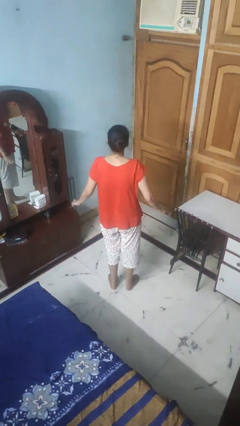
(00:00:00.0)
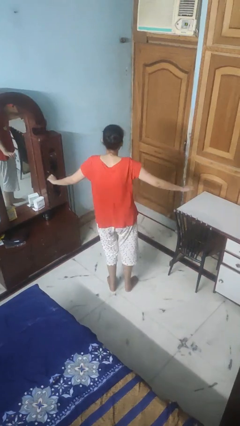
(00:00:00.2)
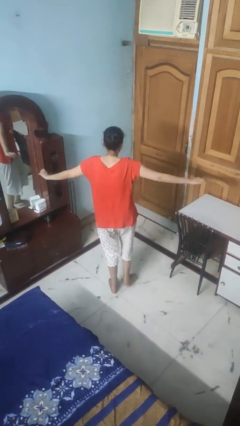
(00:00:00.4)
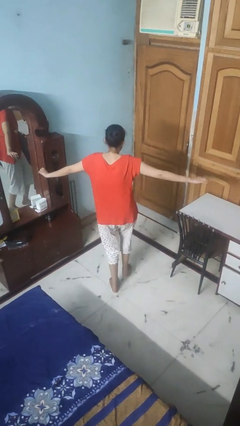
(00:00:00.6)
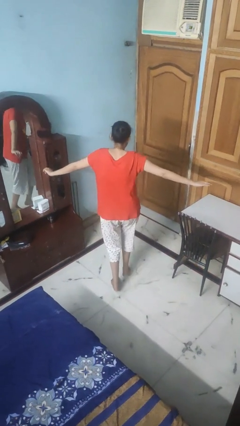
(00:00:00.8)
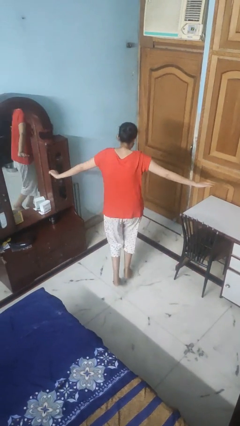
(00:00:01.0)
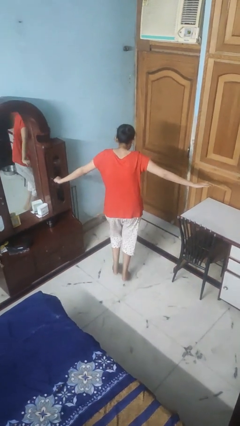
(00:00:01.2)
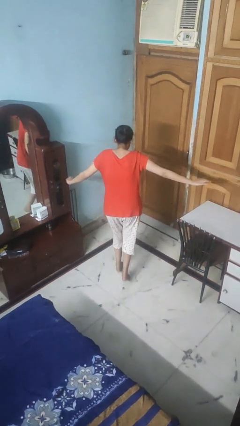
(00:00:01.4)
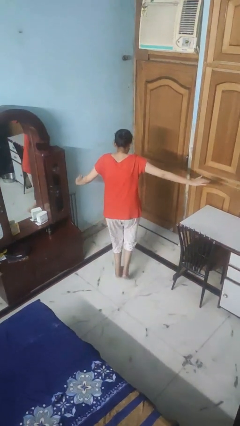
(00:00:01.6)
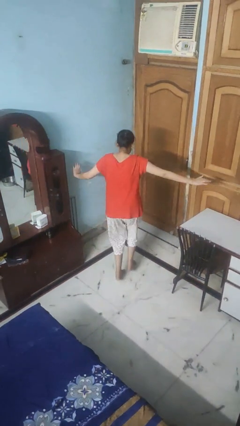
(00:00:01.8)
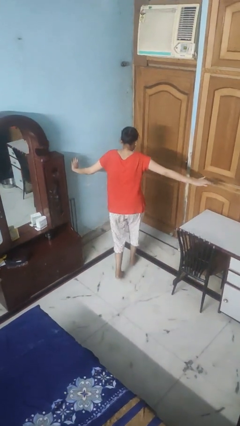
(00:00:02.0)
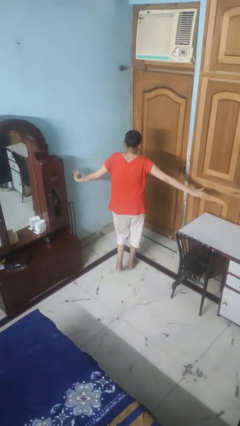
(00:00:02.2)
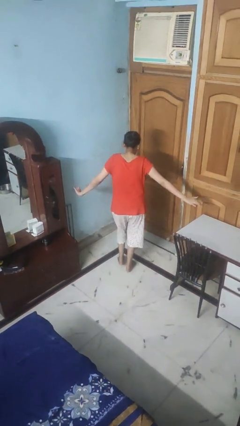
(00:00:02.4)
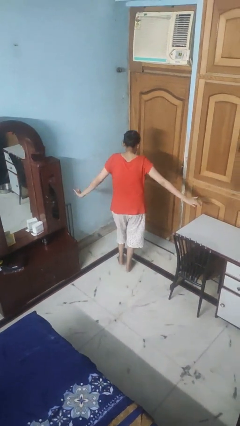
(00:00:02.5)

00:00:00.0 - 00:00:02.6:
person walks tiptoe

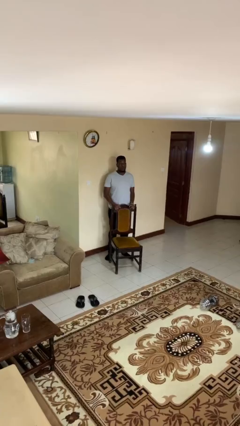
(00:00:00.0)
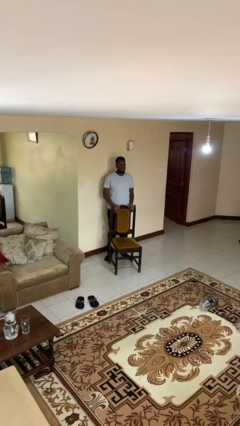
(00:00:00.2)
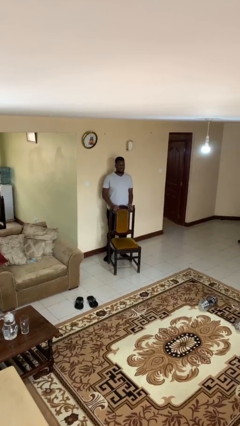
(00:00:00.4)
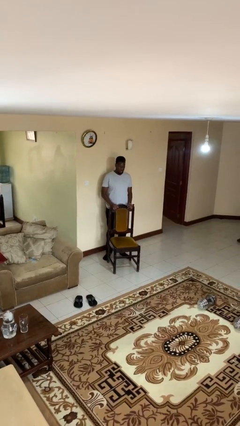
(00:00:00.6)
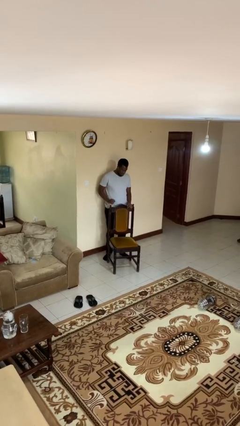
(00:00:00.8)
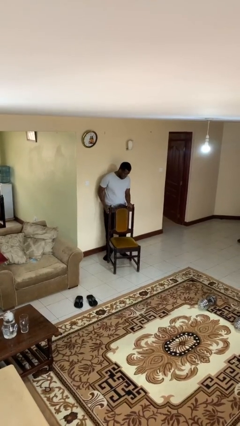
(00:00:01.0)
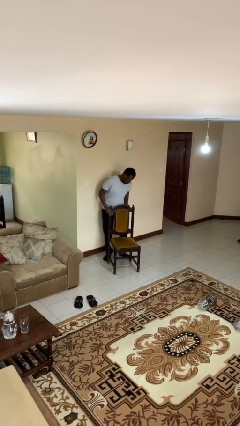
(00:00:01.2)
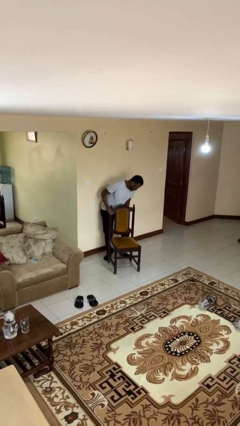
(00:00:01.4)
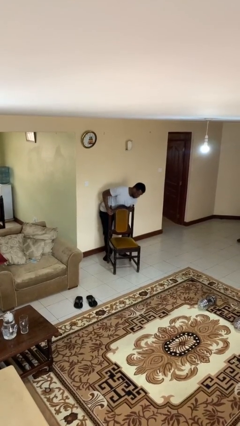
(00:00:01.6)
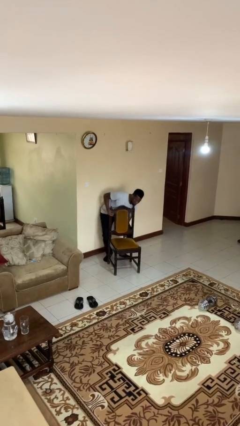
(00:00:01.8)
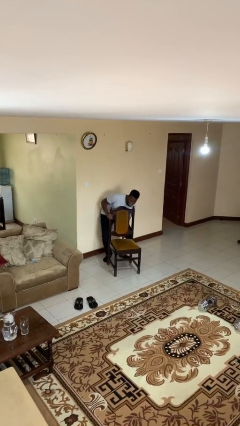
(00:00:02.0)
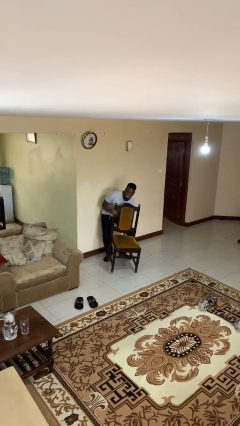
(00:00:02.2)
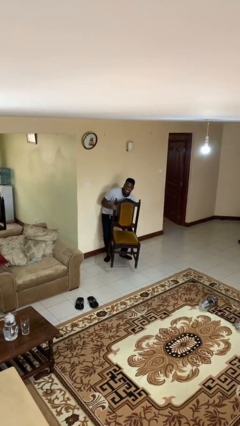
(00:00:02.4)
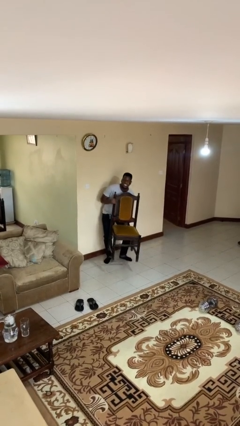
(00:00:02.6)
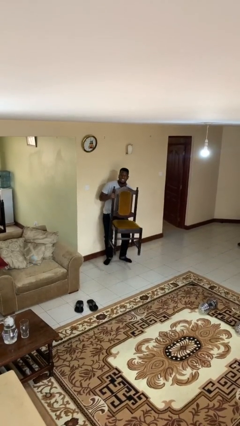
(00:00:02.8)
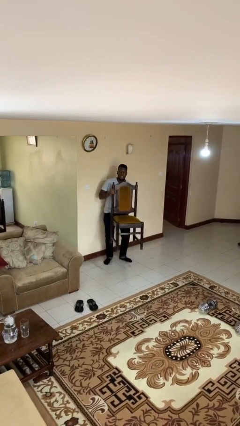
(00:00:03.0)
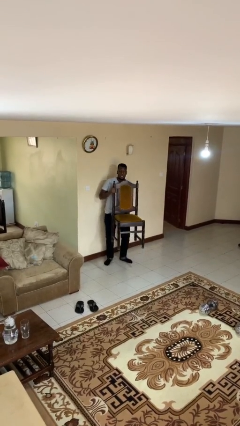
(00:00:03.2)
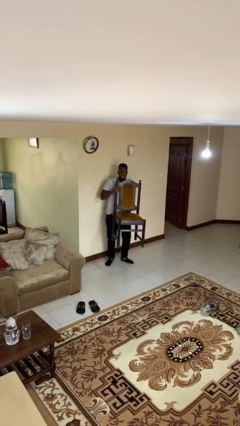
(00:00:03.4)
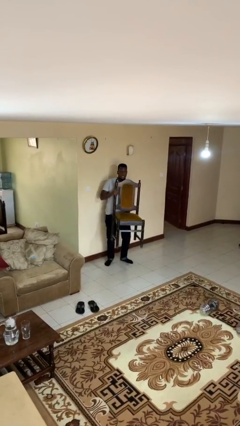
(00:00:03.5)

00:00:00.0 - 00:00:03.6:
person picks up object from floor

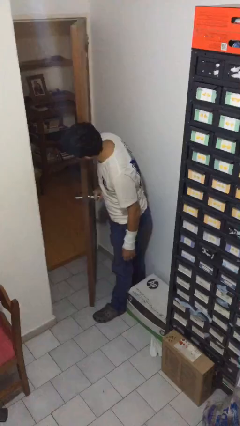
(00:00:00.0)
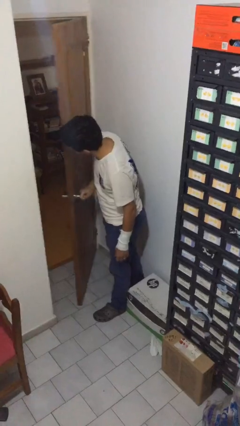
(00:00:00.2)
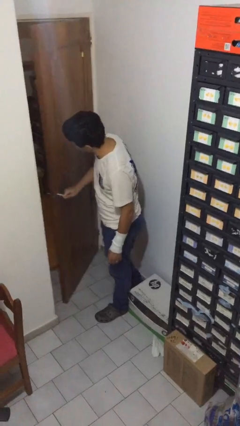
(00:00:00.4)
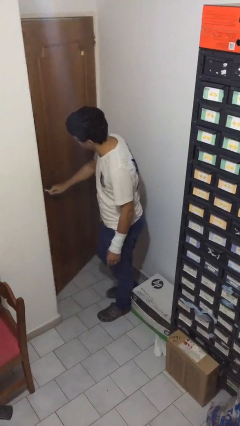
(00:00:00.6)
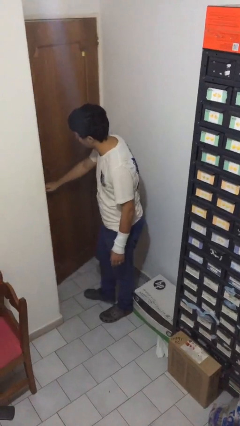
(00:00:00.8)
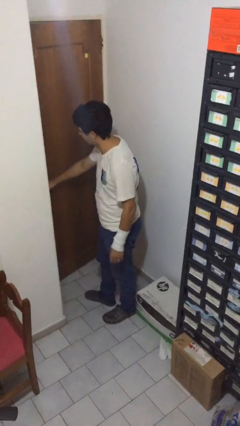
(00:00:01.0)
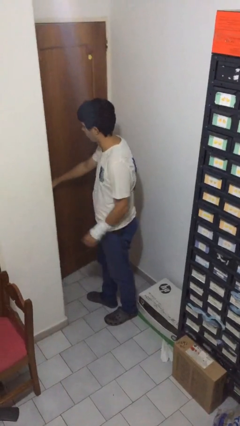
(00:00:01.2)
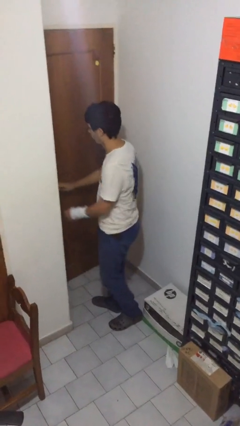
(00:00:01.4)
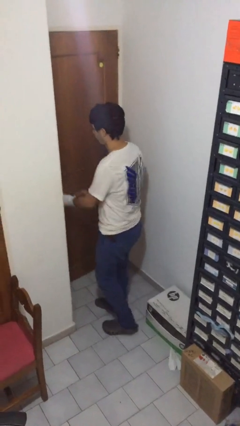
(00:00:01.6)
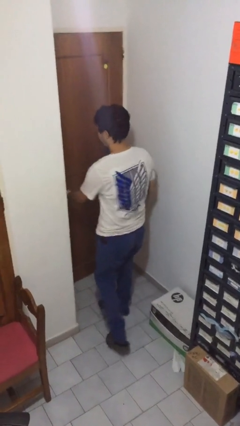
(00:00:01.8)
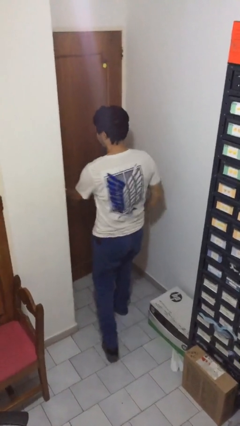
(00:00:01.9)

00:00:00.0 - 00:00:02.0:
person closes facility door

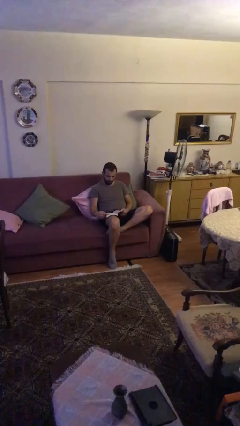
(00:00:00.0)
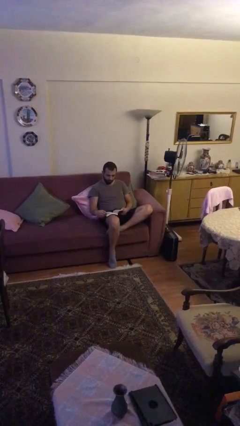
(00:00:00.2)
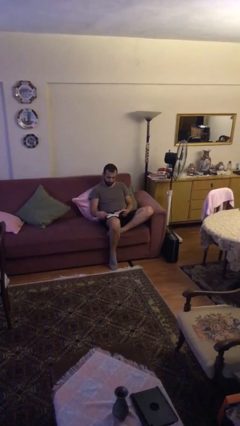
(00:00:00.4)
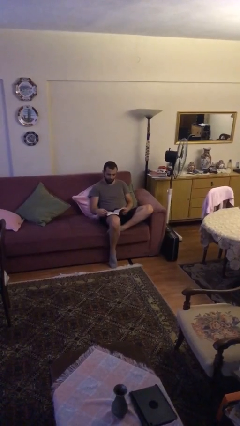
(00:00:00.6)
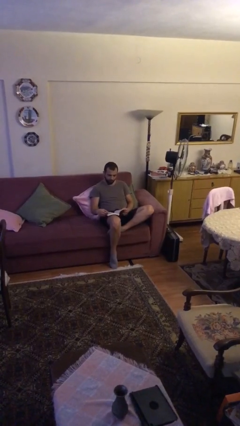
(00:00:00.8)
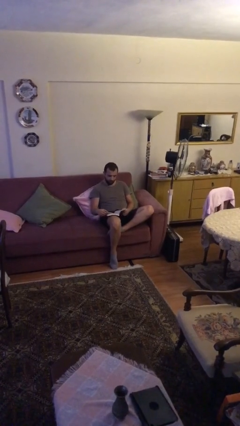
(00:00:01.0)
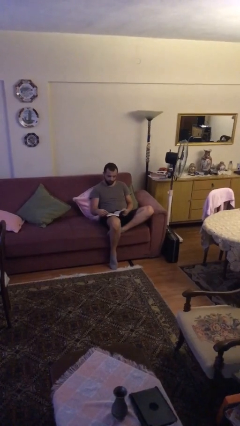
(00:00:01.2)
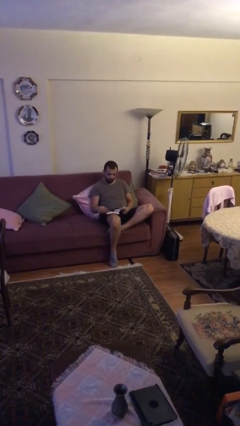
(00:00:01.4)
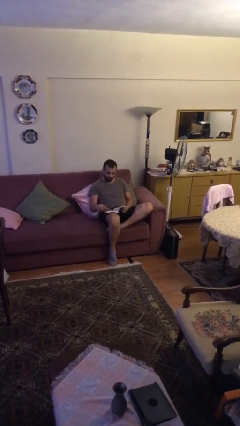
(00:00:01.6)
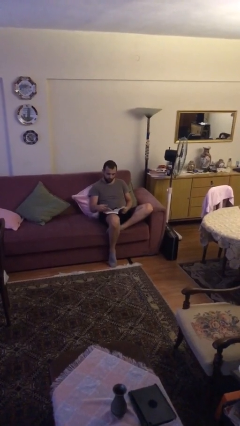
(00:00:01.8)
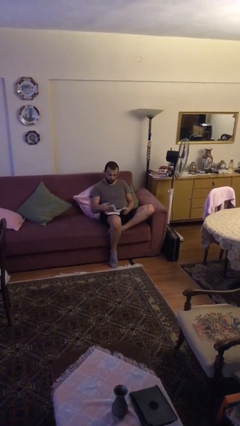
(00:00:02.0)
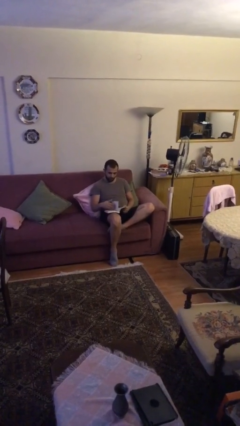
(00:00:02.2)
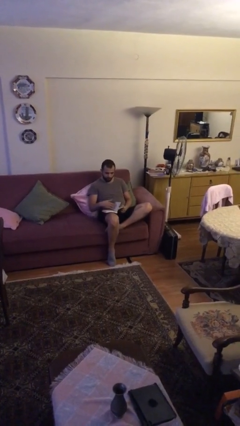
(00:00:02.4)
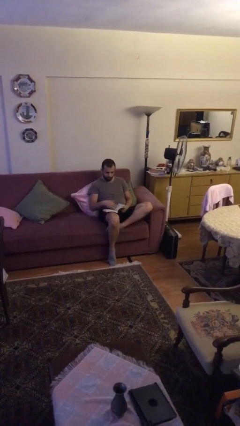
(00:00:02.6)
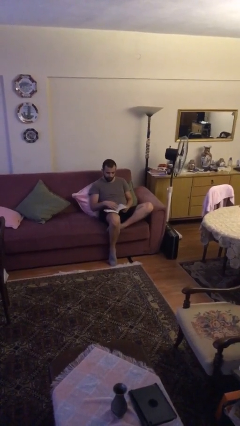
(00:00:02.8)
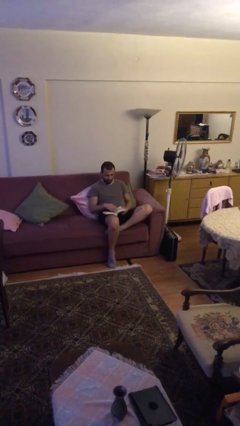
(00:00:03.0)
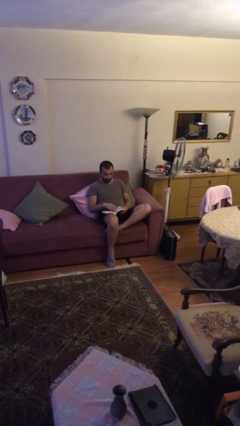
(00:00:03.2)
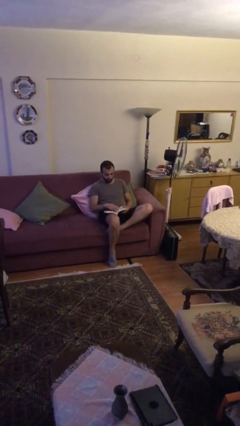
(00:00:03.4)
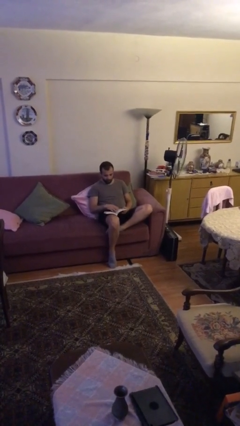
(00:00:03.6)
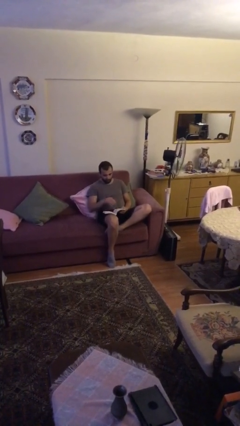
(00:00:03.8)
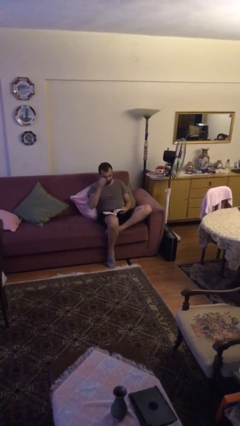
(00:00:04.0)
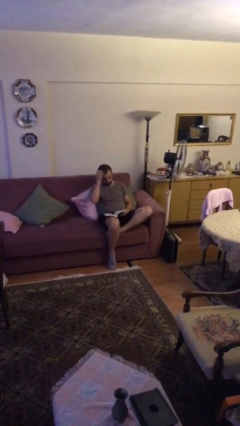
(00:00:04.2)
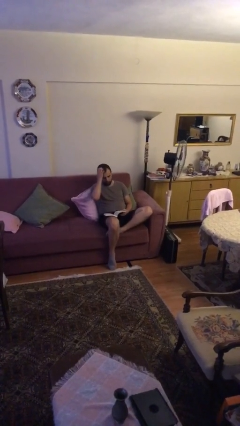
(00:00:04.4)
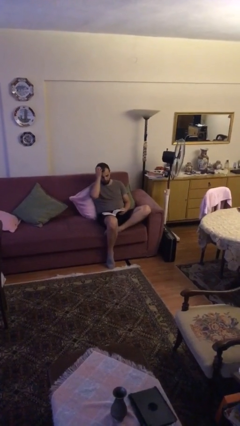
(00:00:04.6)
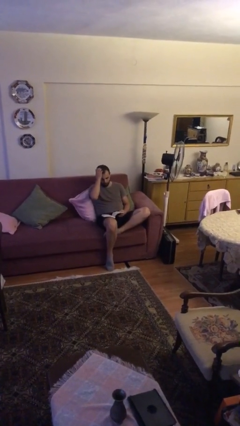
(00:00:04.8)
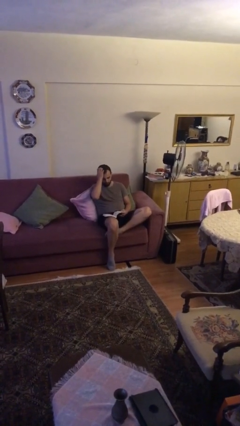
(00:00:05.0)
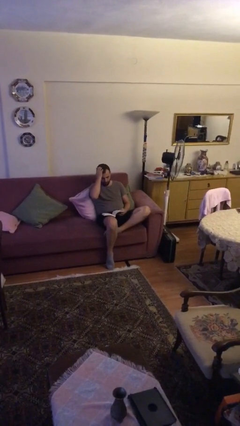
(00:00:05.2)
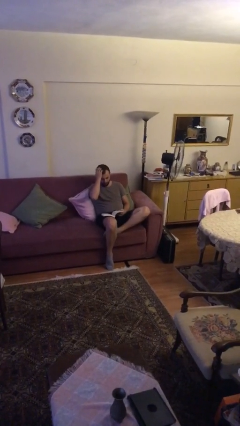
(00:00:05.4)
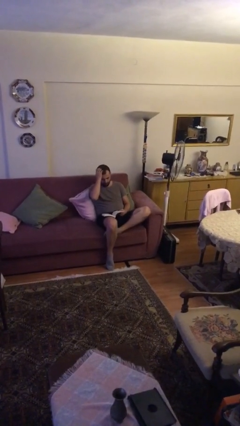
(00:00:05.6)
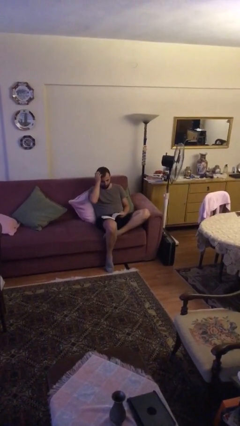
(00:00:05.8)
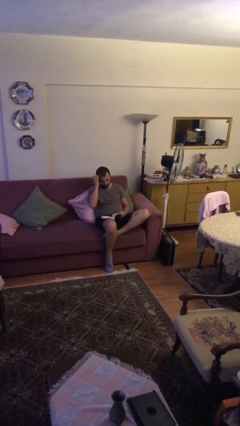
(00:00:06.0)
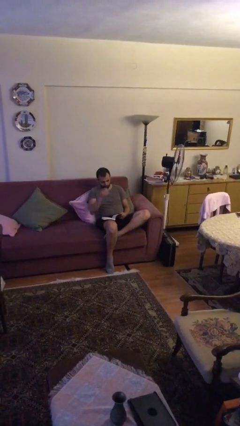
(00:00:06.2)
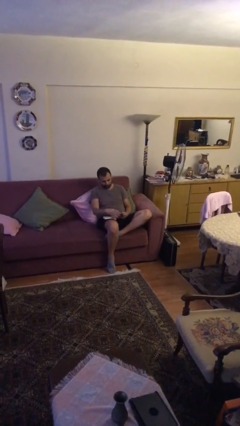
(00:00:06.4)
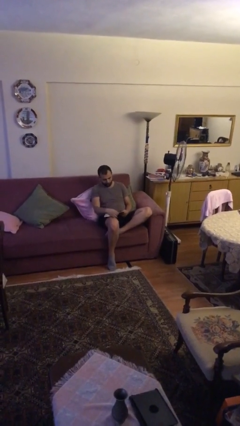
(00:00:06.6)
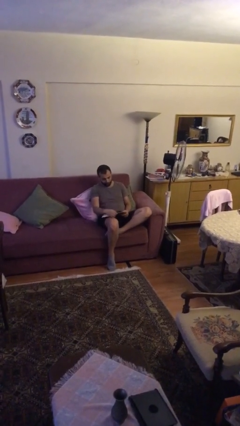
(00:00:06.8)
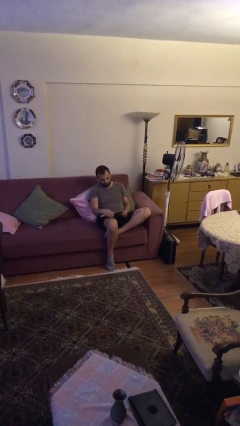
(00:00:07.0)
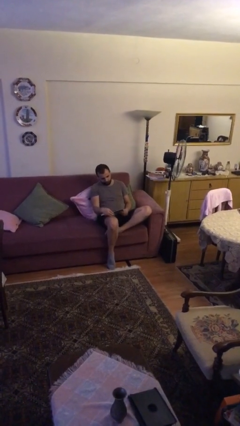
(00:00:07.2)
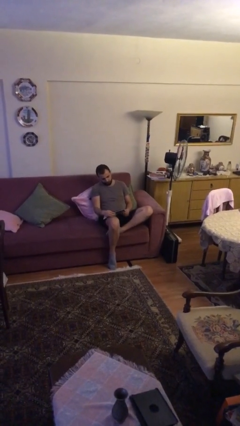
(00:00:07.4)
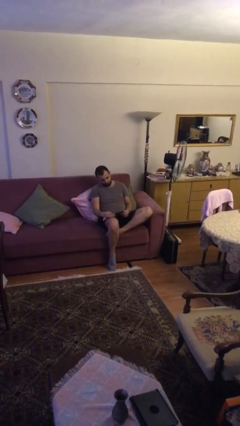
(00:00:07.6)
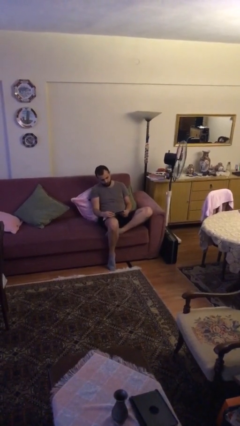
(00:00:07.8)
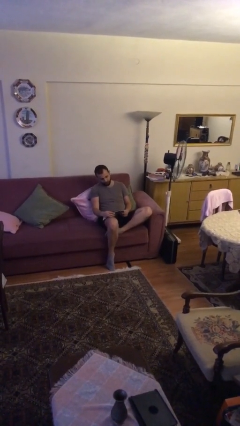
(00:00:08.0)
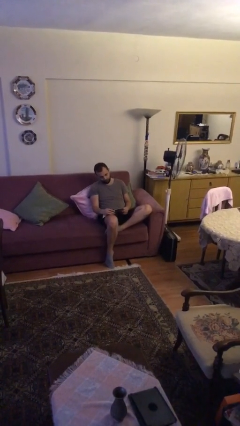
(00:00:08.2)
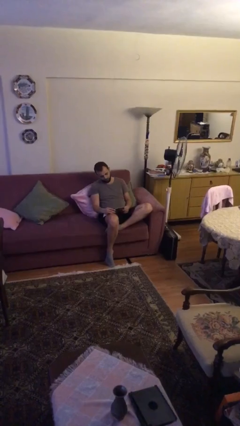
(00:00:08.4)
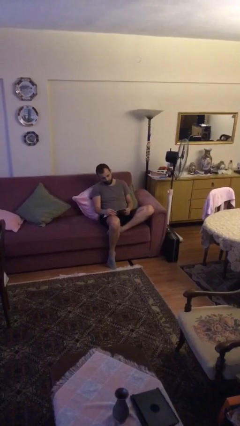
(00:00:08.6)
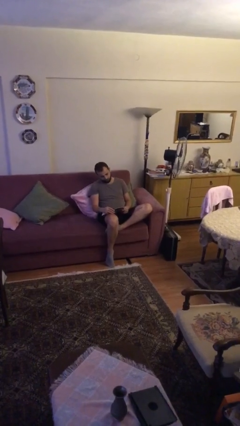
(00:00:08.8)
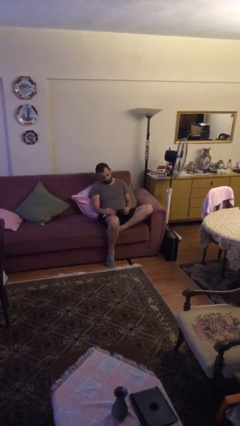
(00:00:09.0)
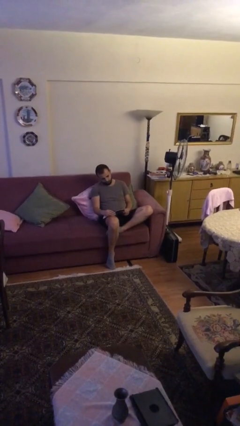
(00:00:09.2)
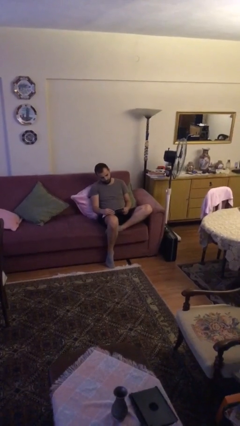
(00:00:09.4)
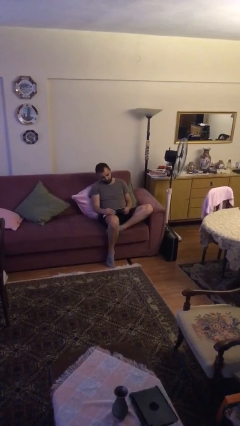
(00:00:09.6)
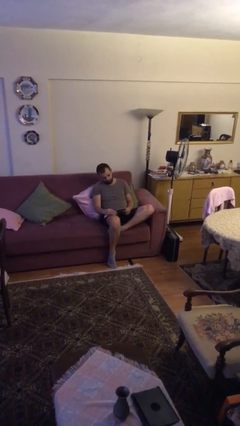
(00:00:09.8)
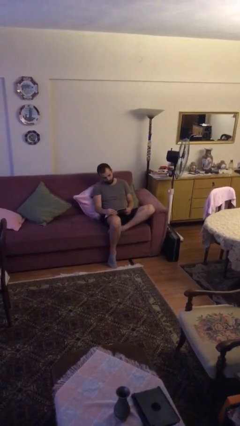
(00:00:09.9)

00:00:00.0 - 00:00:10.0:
person reads document
